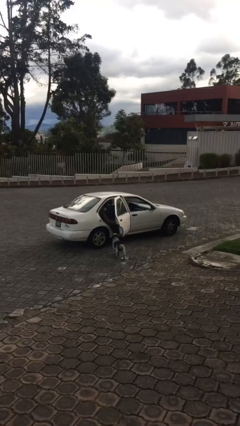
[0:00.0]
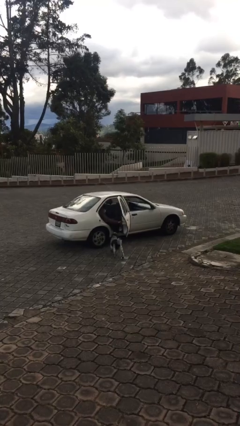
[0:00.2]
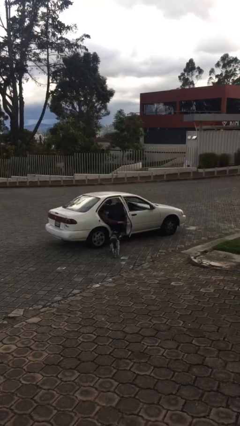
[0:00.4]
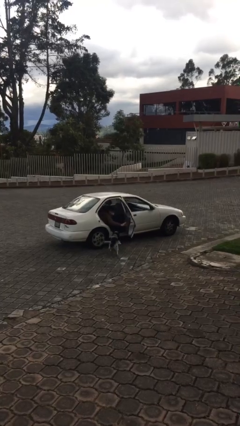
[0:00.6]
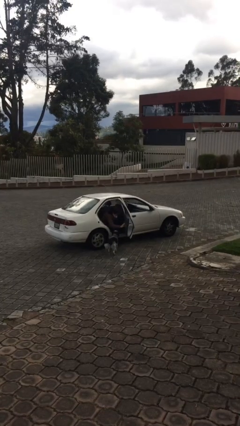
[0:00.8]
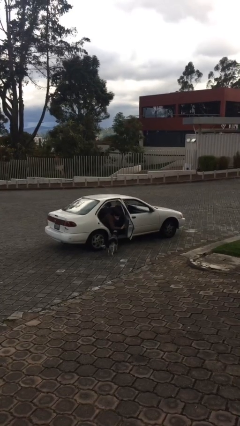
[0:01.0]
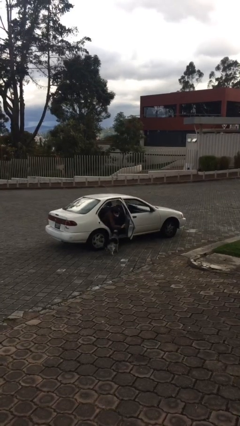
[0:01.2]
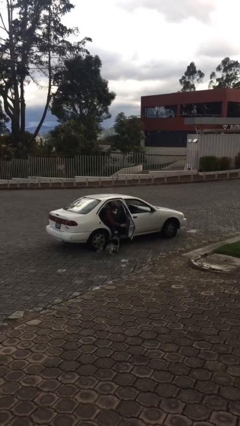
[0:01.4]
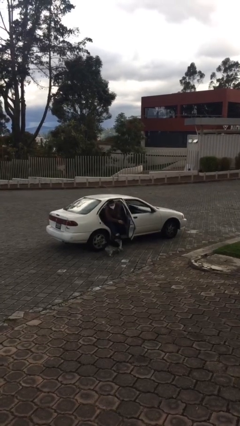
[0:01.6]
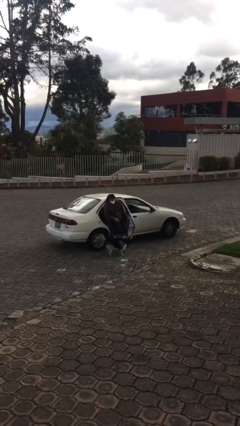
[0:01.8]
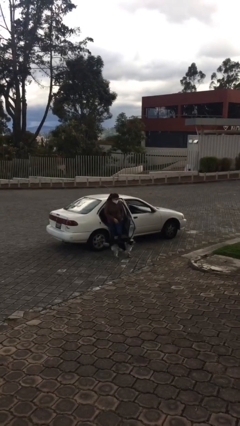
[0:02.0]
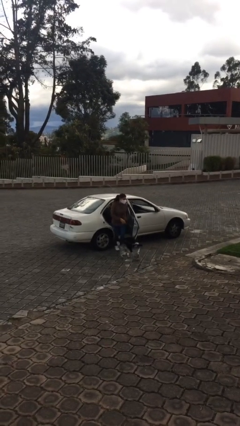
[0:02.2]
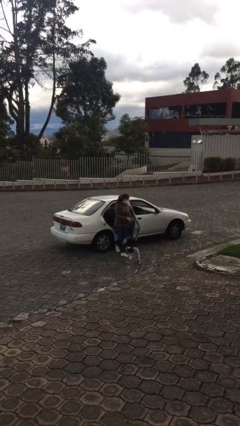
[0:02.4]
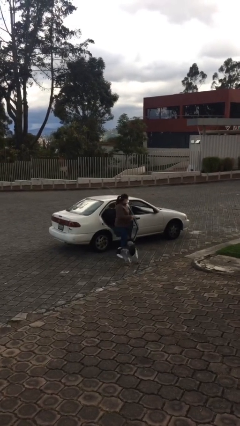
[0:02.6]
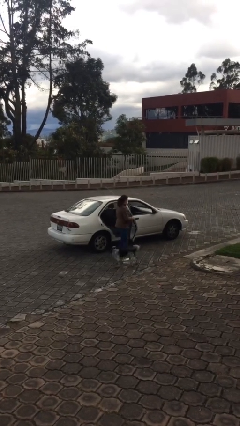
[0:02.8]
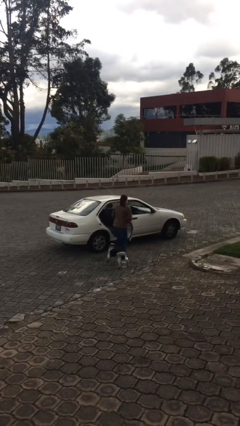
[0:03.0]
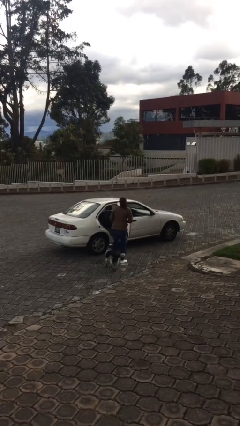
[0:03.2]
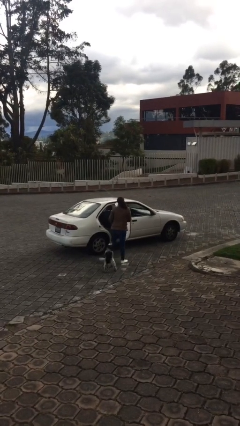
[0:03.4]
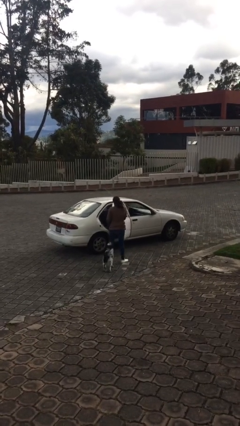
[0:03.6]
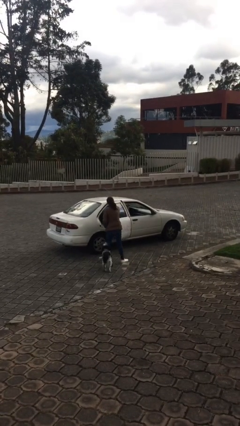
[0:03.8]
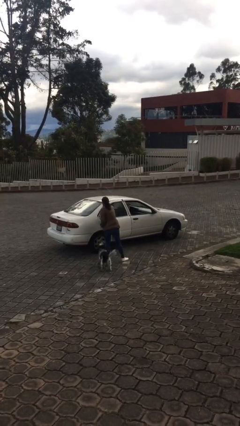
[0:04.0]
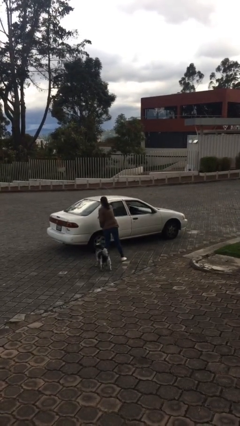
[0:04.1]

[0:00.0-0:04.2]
car drops off person

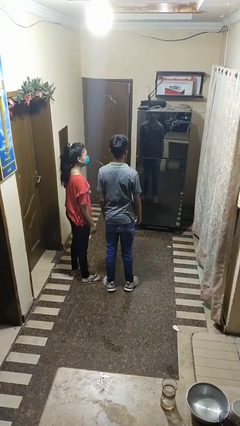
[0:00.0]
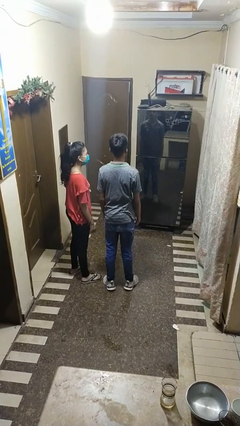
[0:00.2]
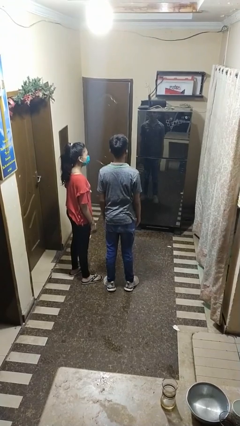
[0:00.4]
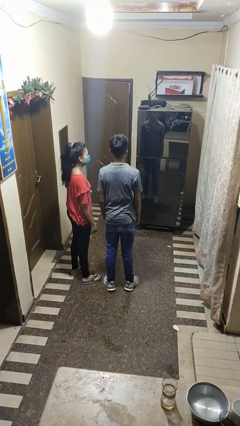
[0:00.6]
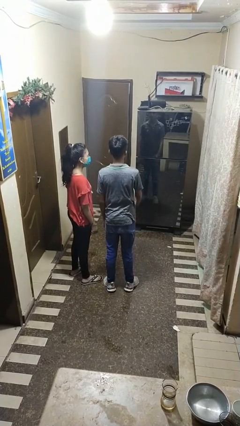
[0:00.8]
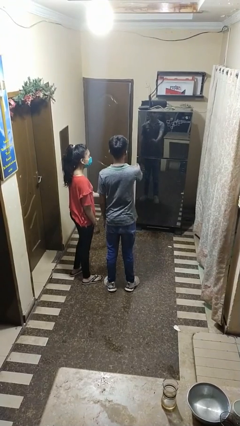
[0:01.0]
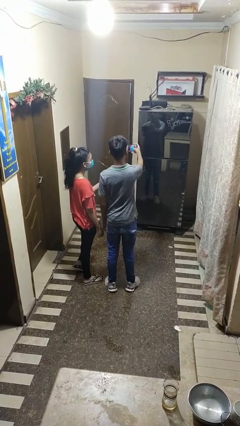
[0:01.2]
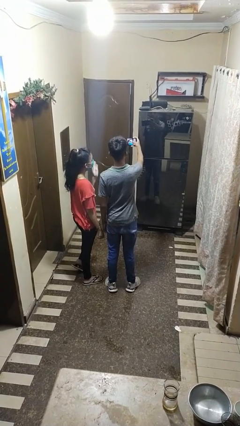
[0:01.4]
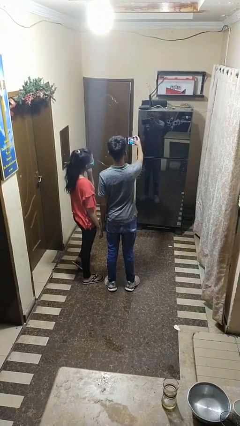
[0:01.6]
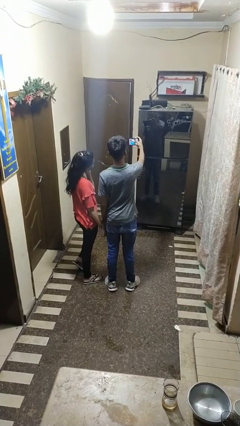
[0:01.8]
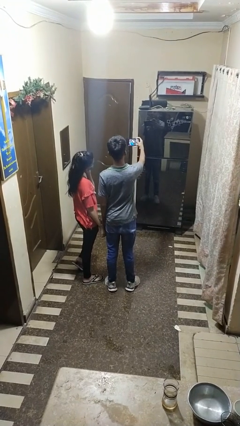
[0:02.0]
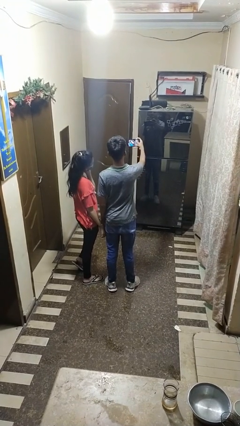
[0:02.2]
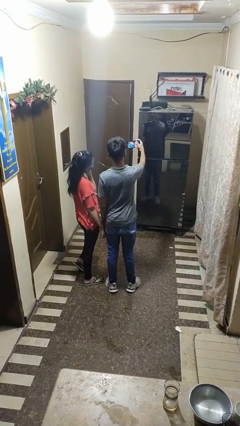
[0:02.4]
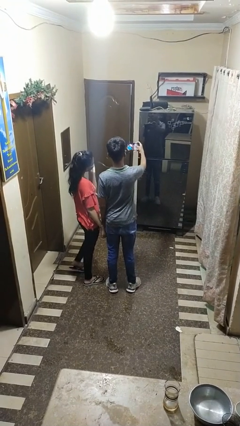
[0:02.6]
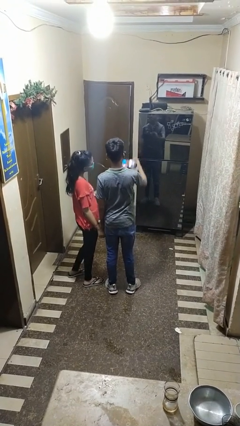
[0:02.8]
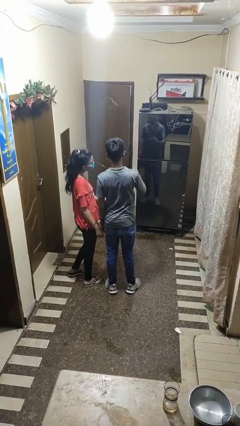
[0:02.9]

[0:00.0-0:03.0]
person takes selfie with person

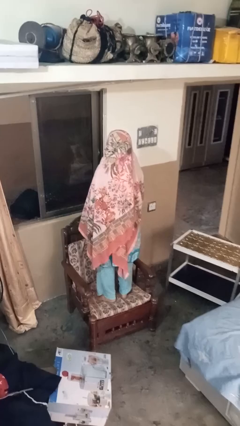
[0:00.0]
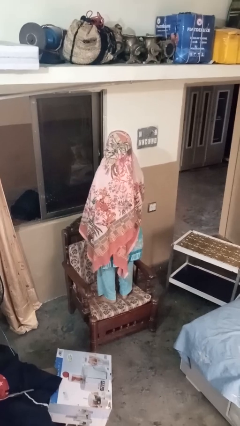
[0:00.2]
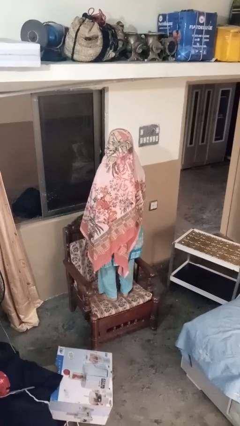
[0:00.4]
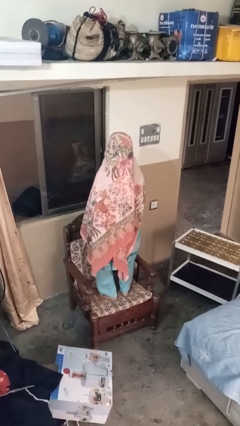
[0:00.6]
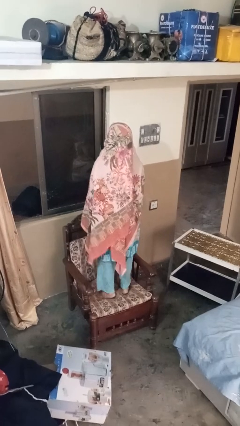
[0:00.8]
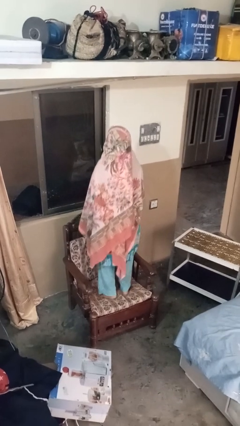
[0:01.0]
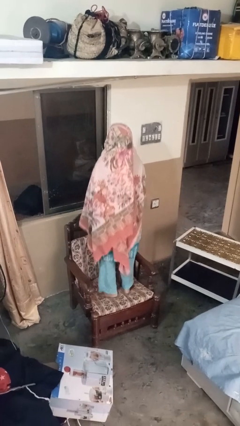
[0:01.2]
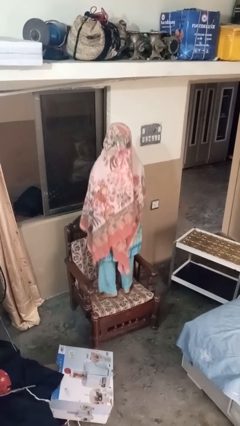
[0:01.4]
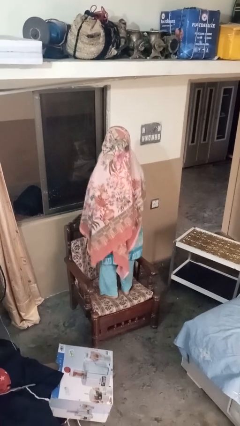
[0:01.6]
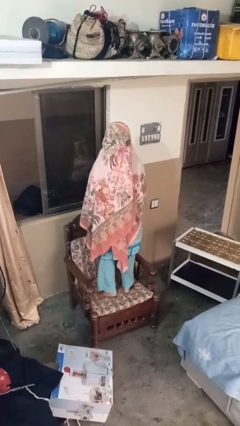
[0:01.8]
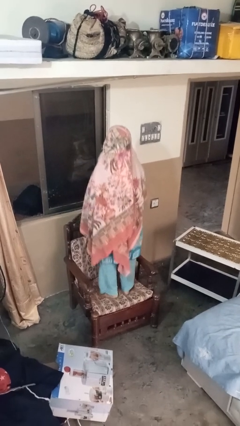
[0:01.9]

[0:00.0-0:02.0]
person jumps on couch

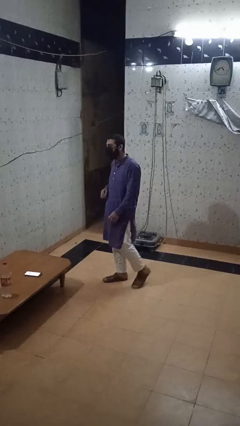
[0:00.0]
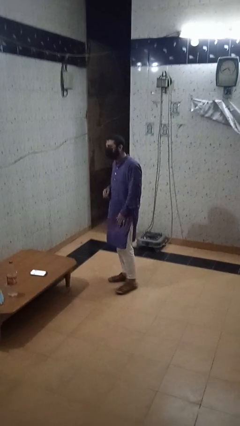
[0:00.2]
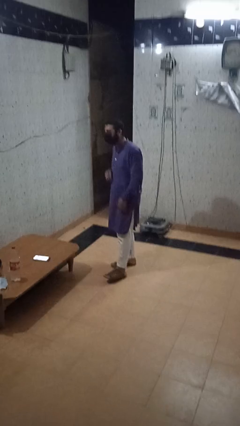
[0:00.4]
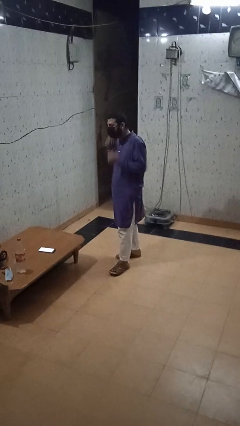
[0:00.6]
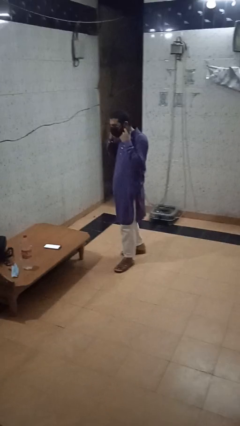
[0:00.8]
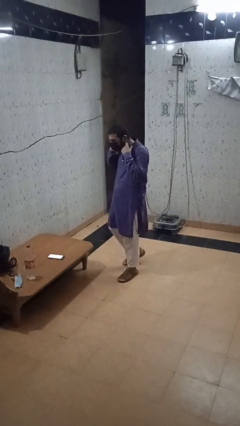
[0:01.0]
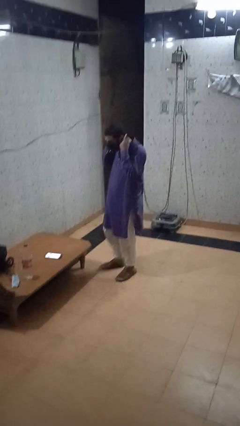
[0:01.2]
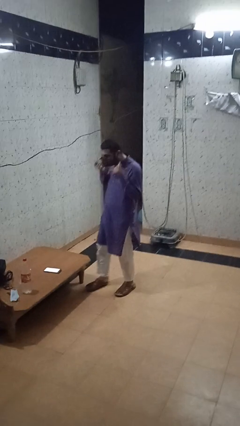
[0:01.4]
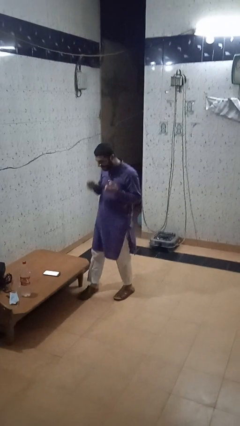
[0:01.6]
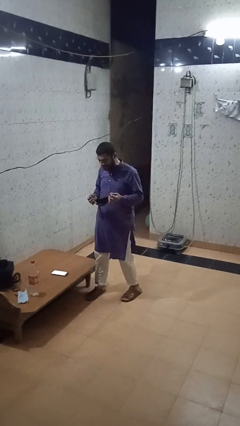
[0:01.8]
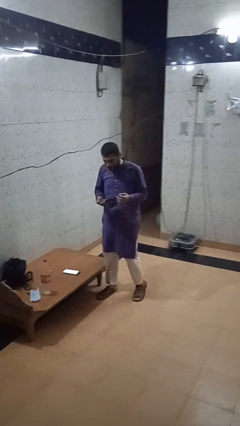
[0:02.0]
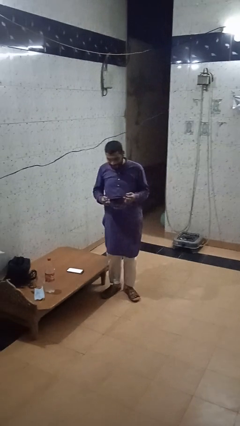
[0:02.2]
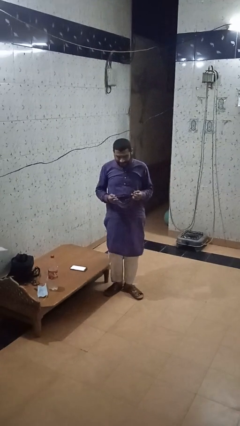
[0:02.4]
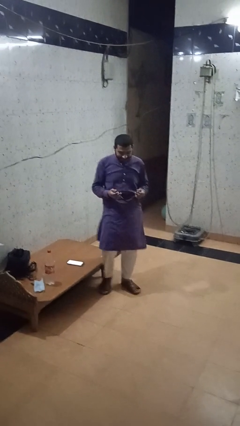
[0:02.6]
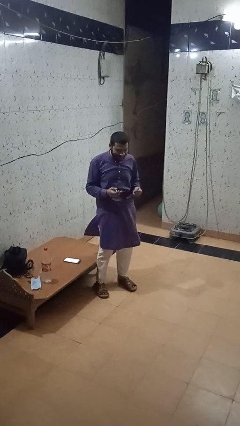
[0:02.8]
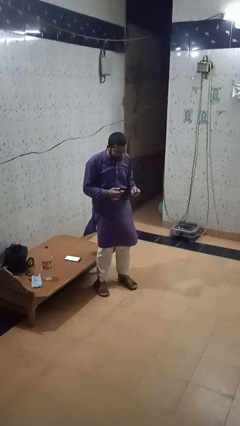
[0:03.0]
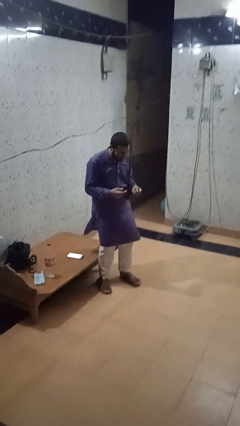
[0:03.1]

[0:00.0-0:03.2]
person takes off facemask

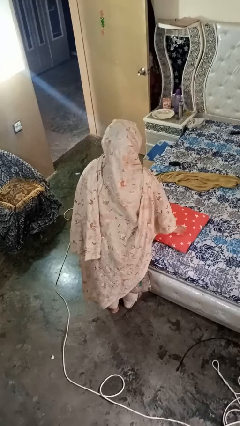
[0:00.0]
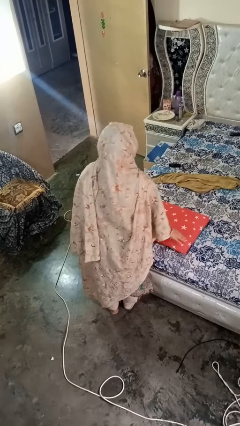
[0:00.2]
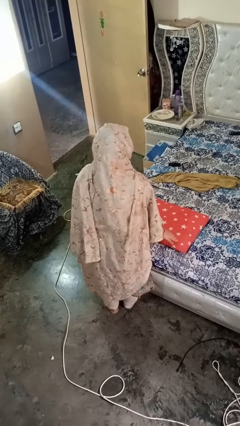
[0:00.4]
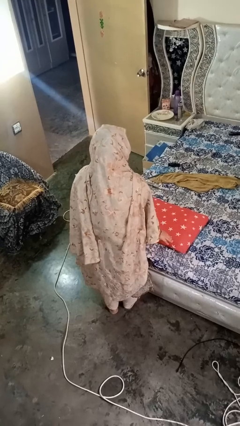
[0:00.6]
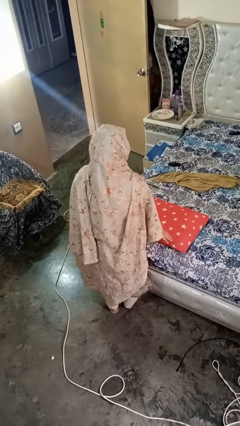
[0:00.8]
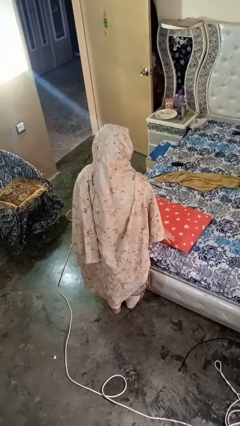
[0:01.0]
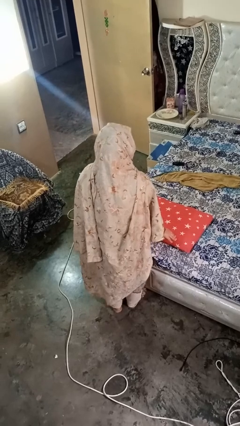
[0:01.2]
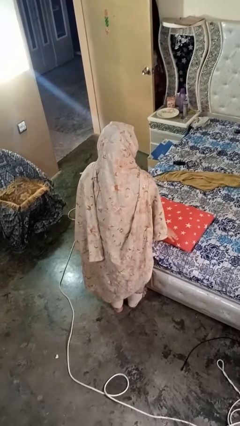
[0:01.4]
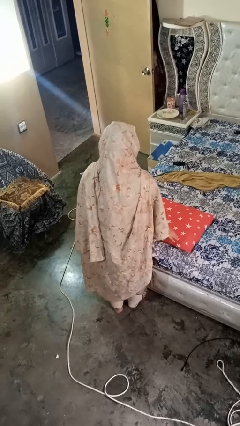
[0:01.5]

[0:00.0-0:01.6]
person waves hand over object

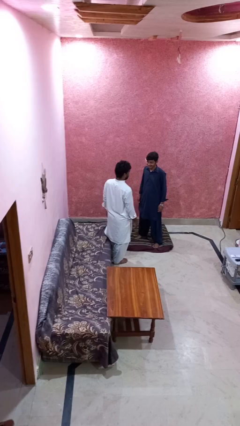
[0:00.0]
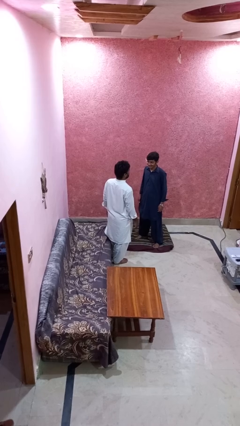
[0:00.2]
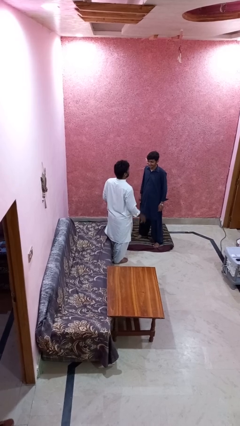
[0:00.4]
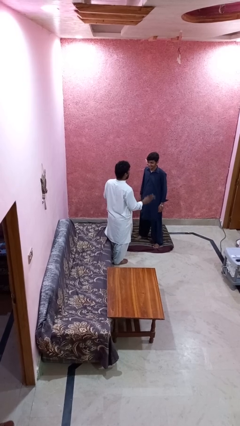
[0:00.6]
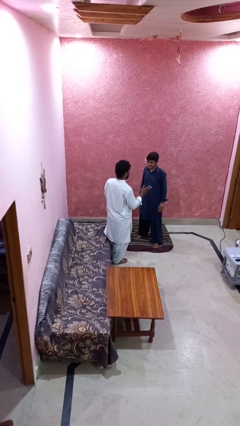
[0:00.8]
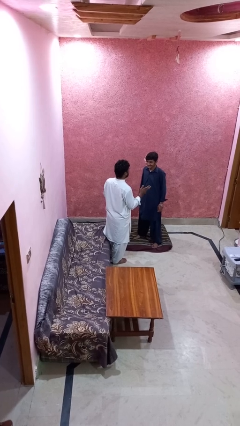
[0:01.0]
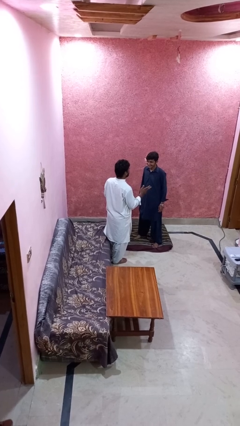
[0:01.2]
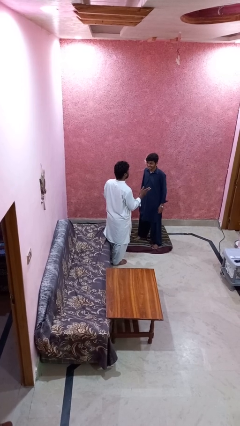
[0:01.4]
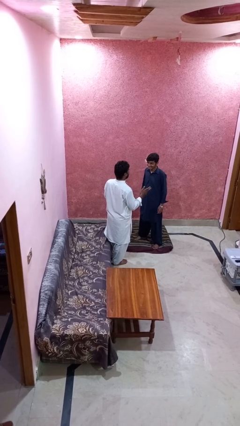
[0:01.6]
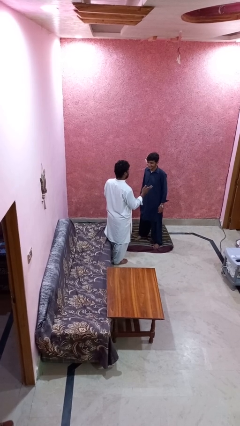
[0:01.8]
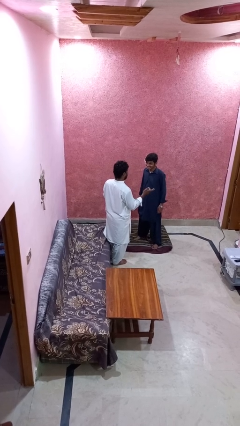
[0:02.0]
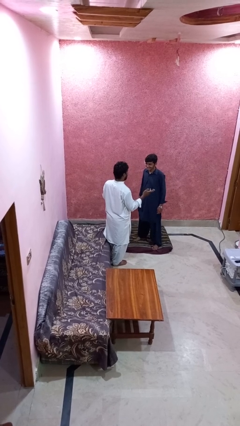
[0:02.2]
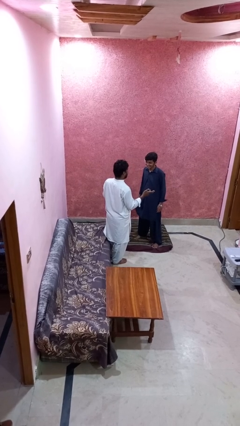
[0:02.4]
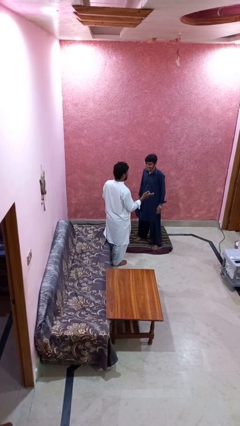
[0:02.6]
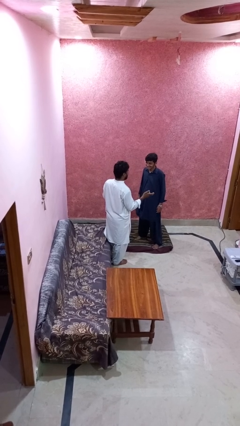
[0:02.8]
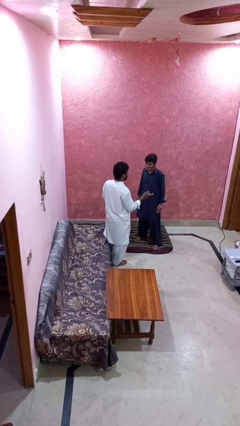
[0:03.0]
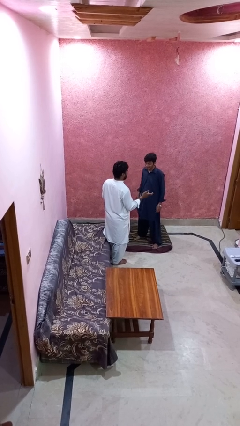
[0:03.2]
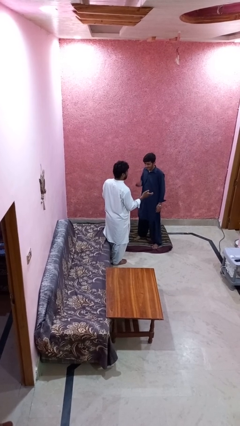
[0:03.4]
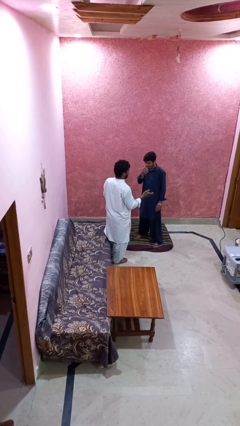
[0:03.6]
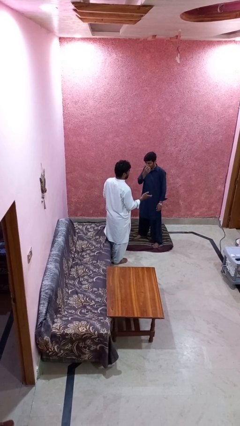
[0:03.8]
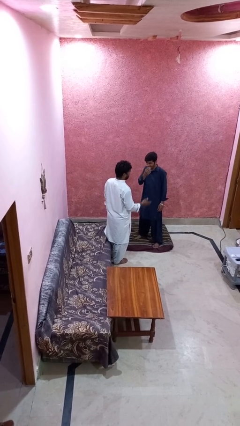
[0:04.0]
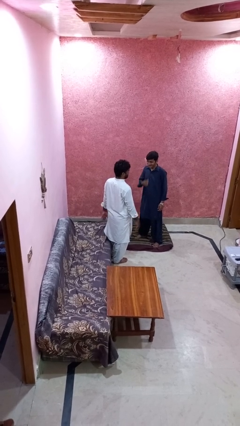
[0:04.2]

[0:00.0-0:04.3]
person laughs with person
